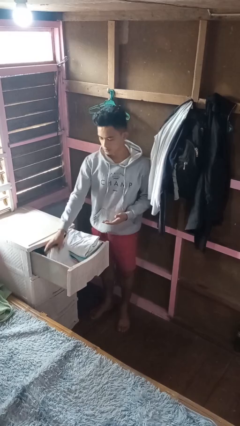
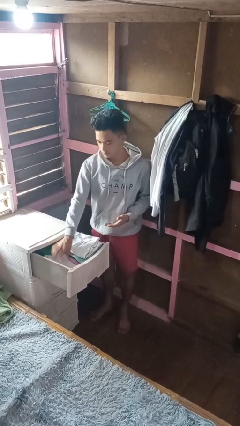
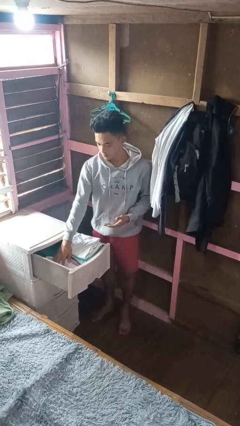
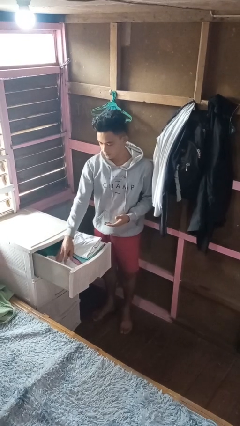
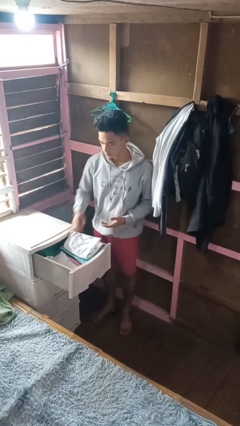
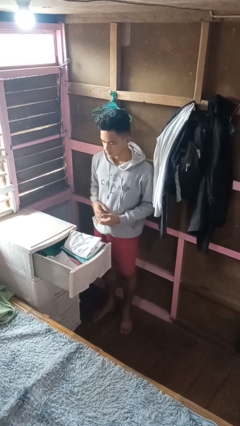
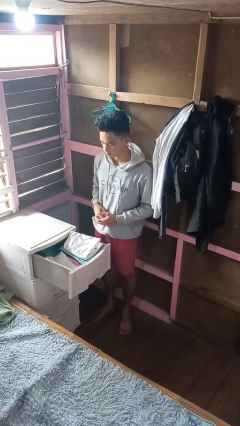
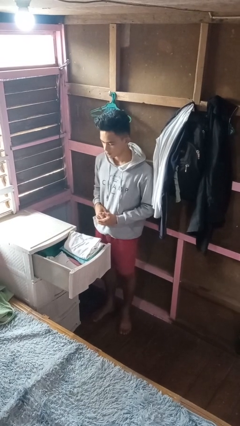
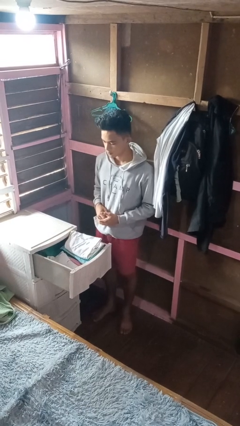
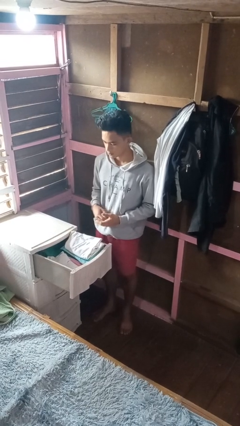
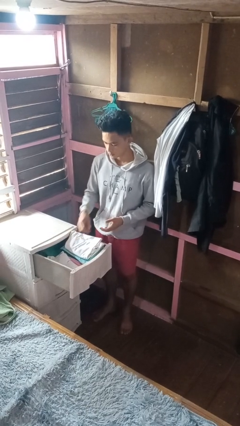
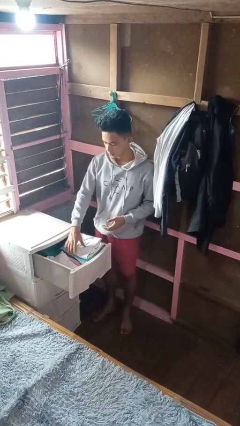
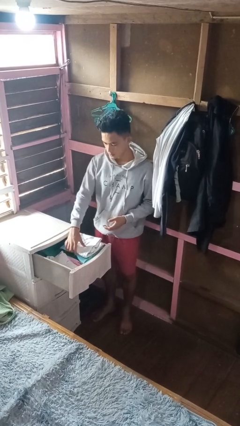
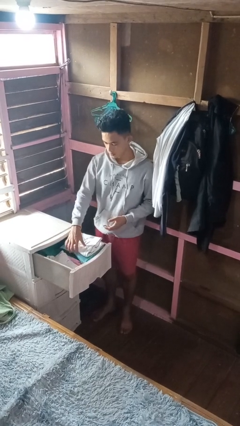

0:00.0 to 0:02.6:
person puts clothes into dresser

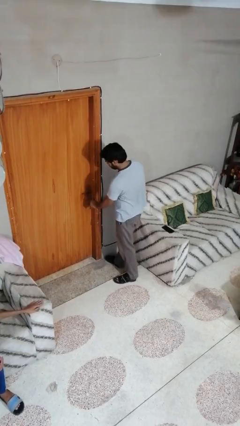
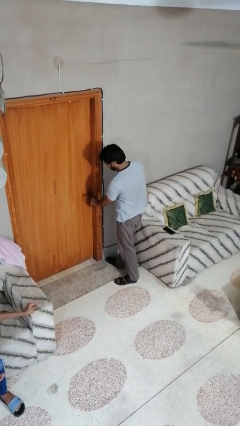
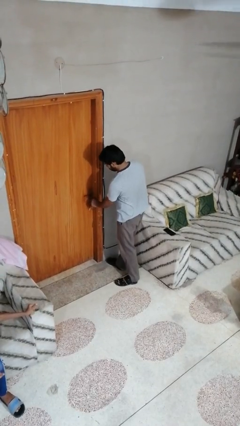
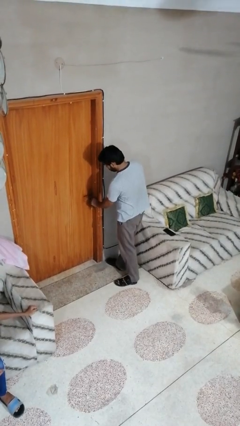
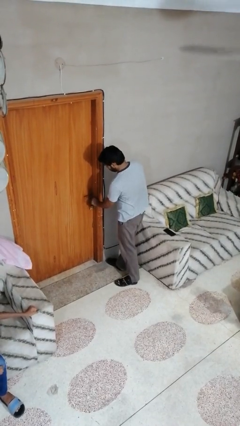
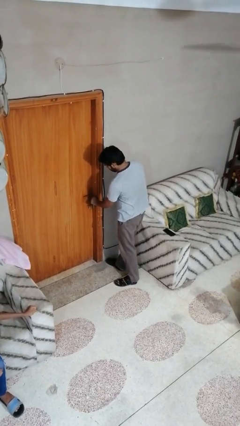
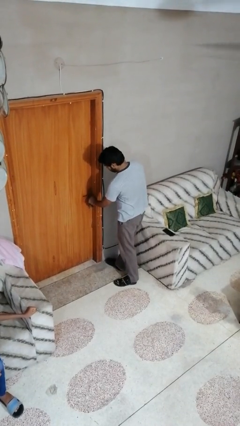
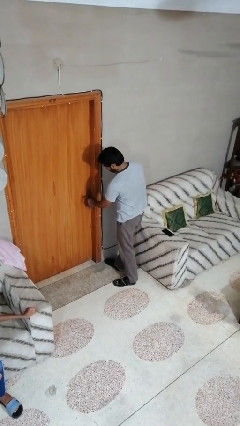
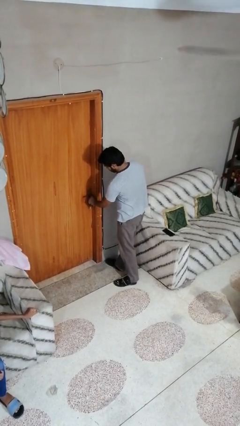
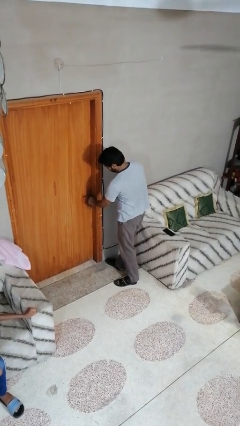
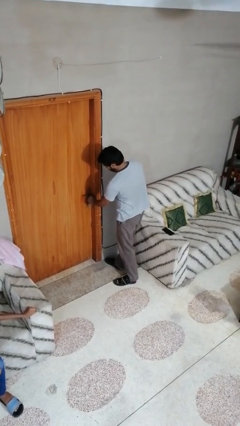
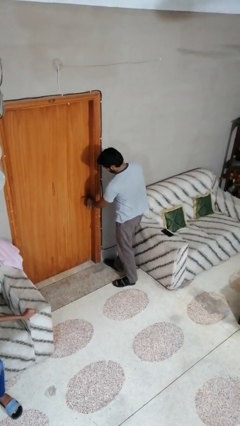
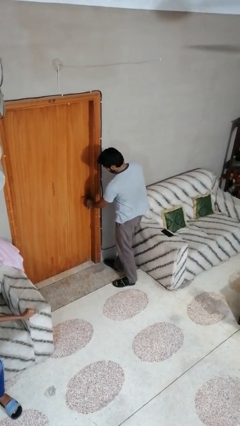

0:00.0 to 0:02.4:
person unlocks door with keys

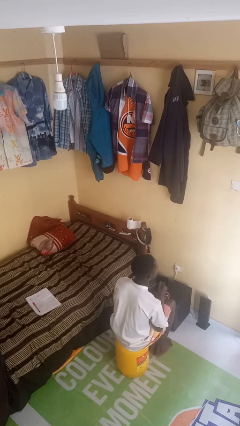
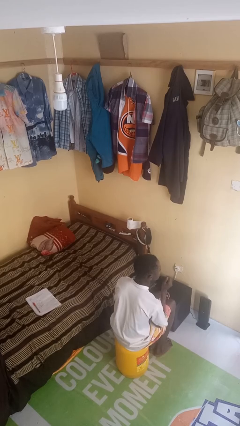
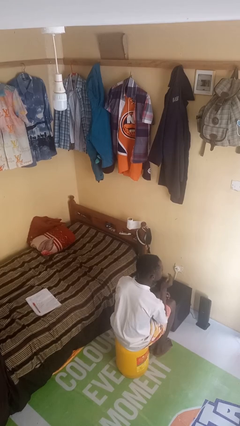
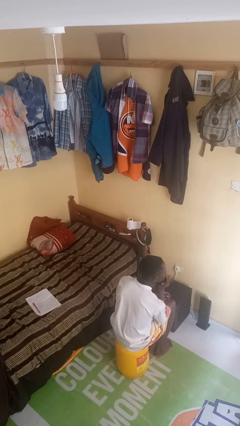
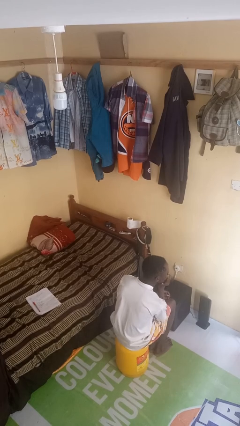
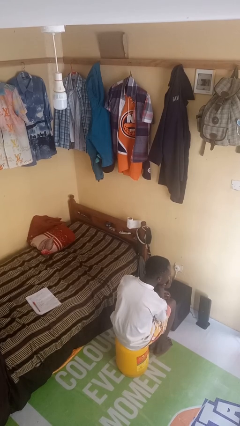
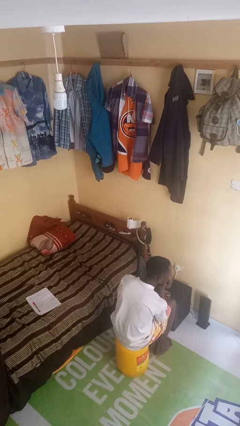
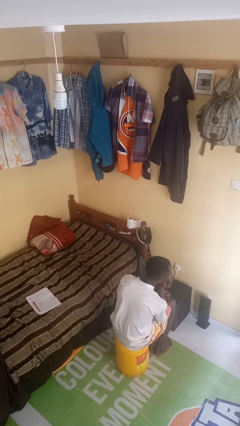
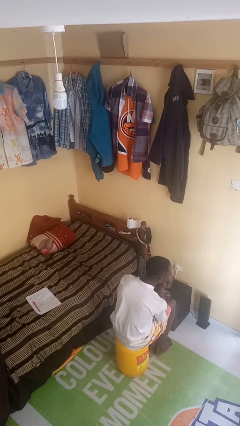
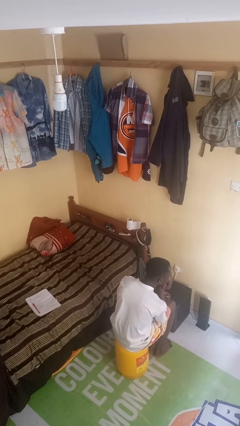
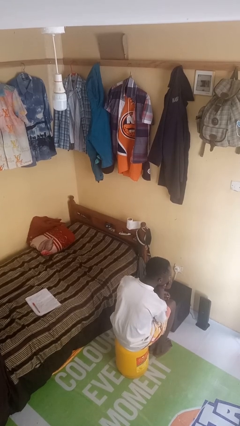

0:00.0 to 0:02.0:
person strokes chin

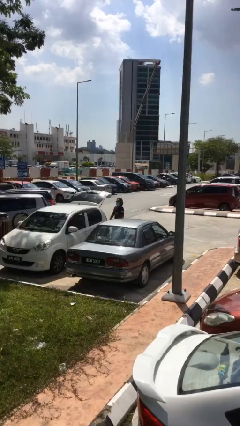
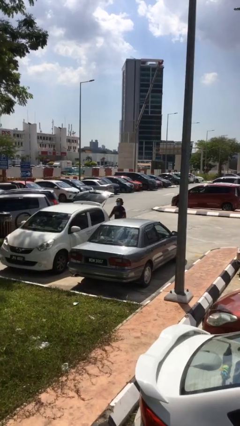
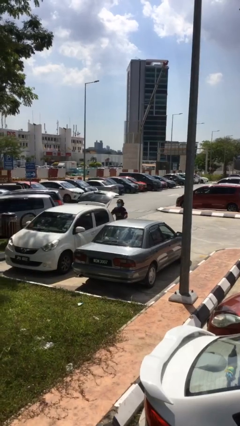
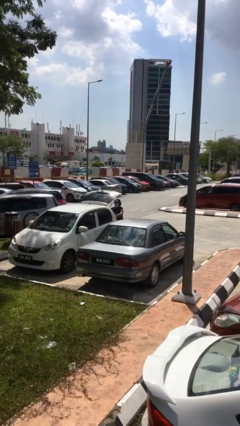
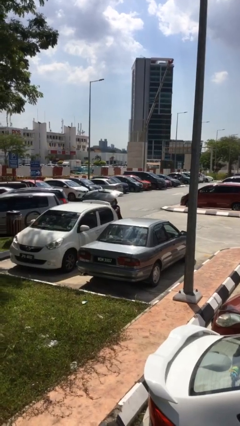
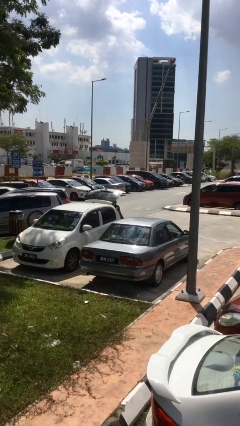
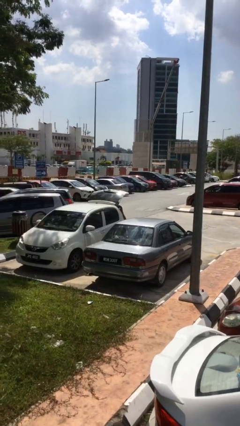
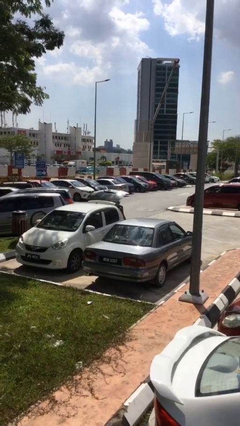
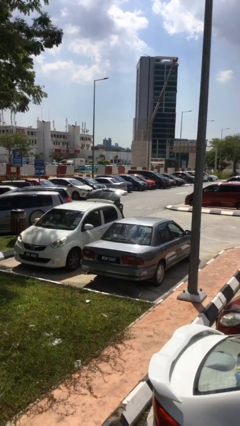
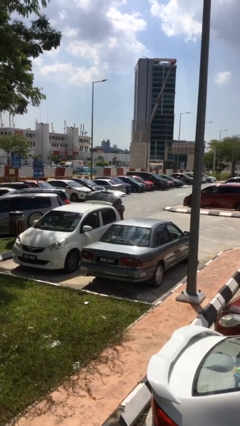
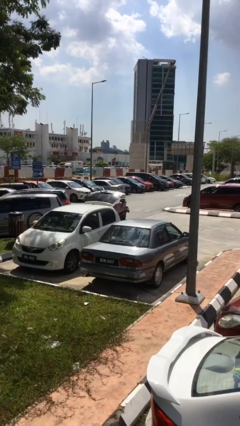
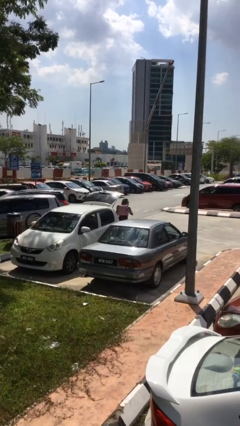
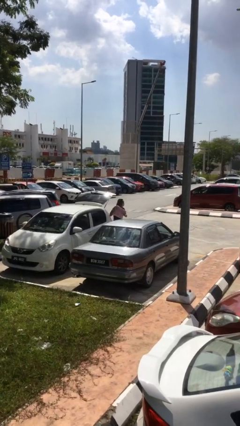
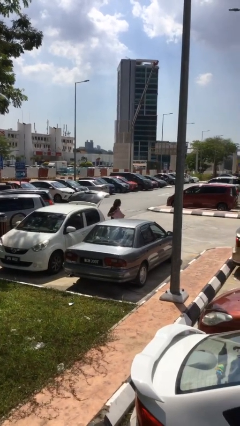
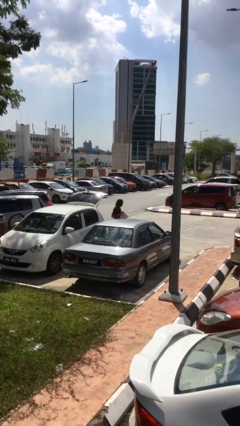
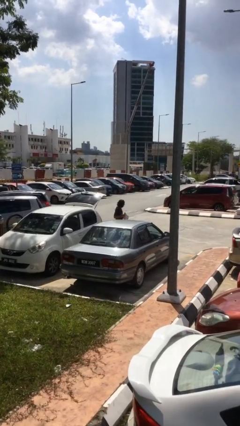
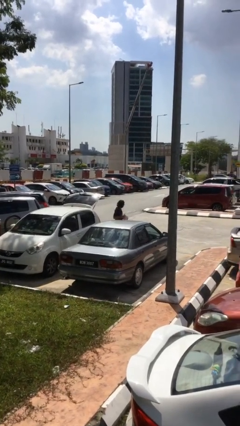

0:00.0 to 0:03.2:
person unloads car

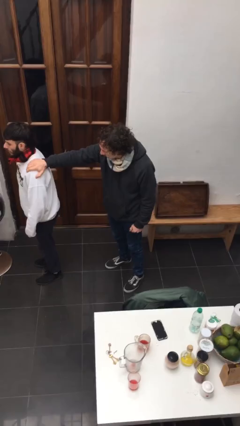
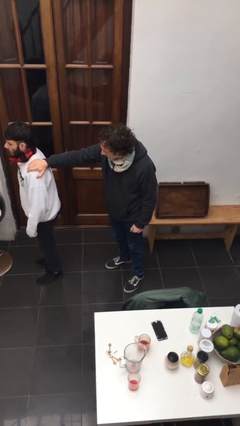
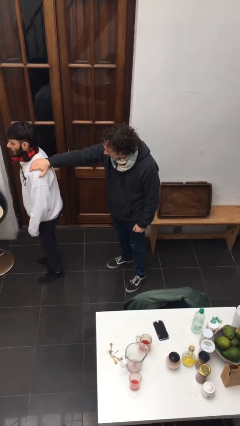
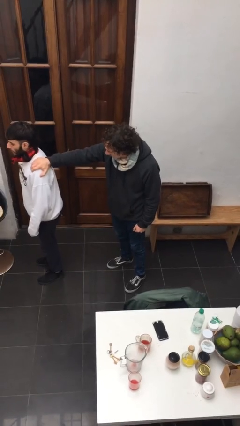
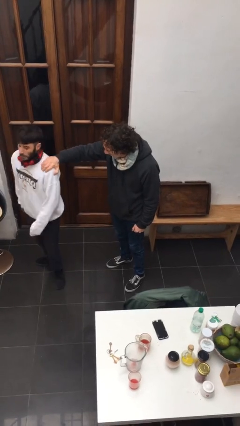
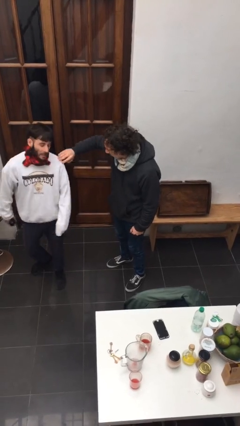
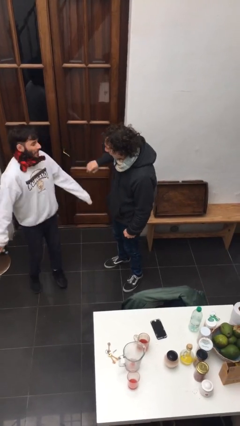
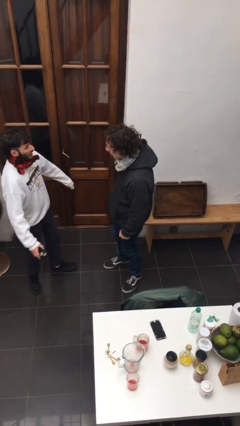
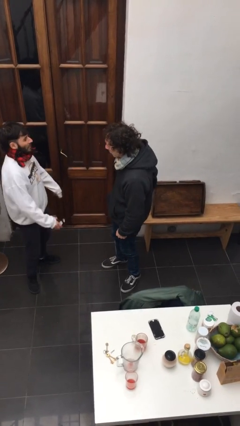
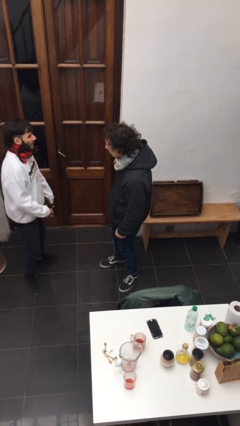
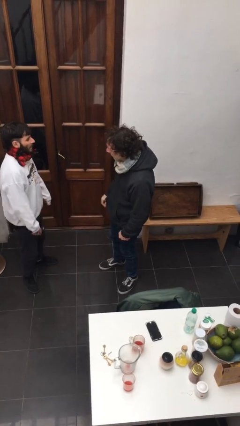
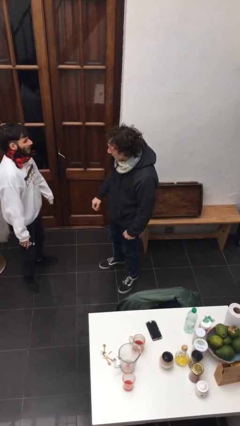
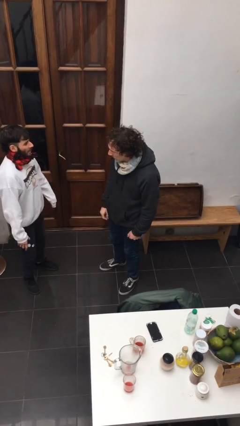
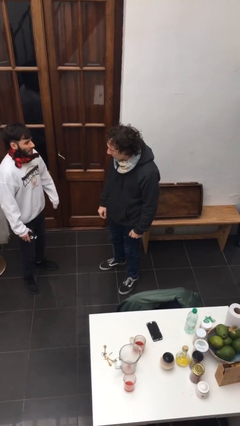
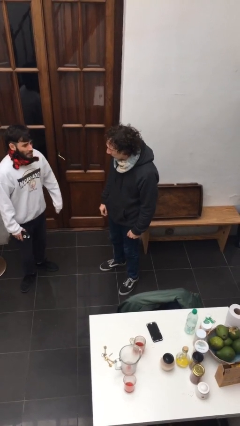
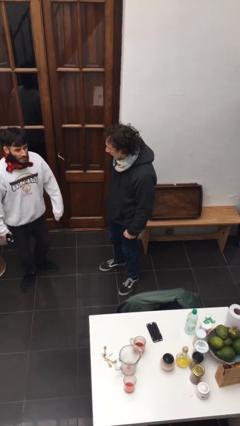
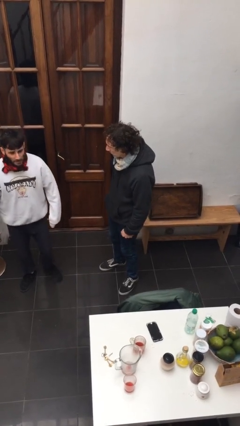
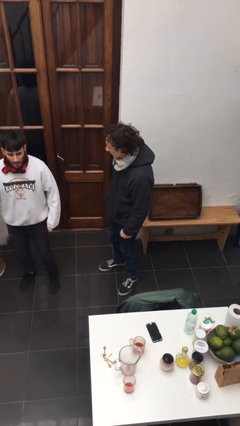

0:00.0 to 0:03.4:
person spins person around

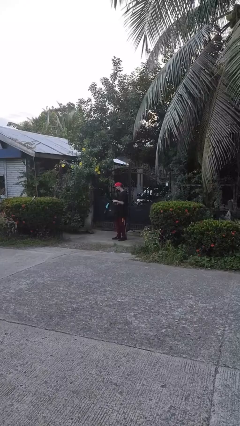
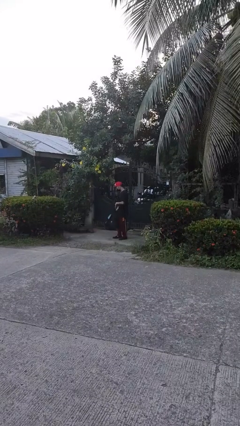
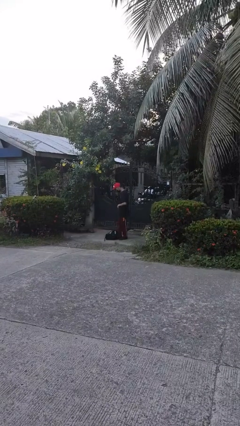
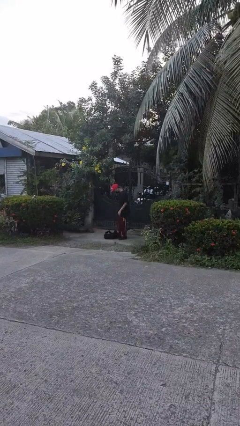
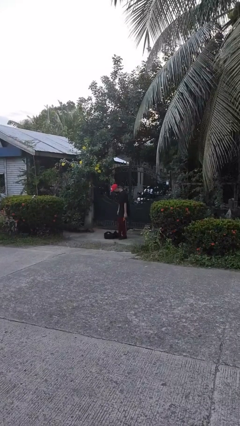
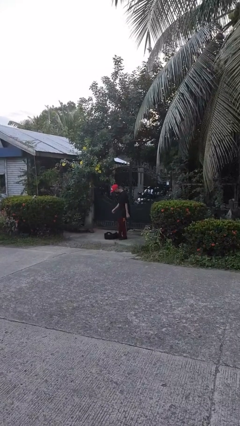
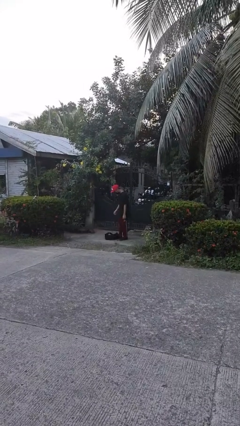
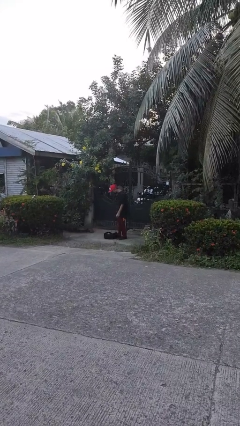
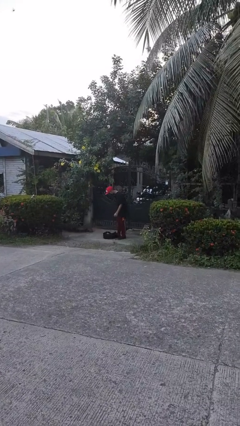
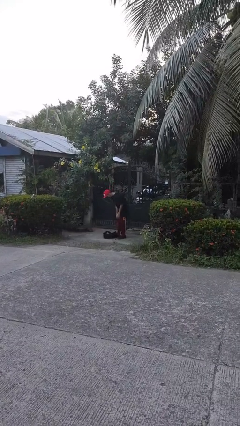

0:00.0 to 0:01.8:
person drops object

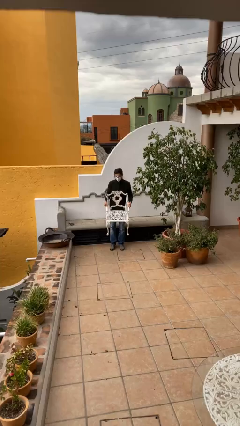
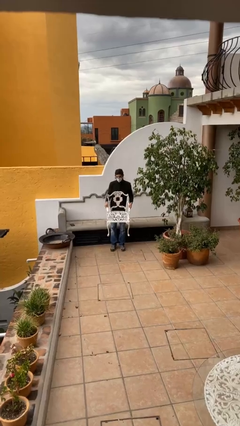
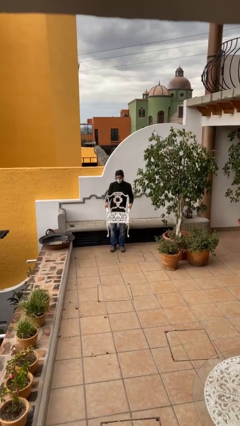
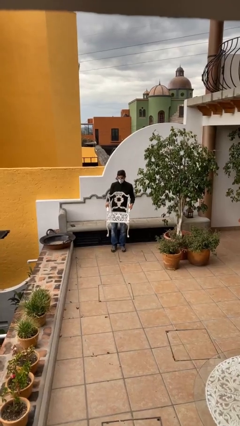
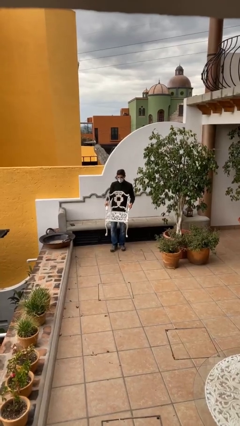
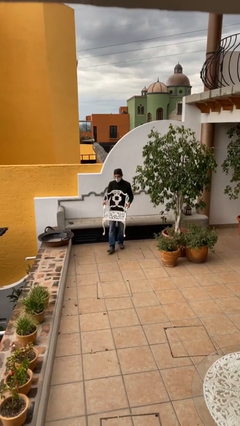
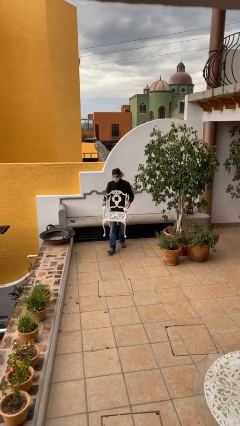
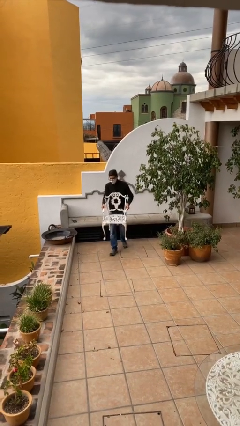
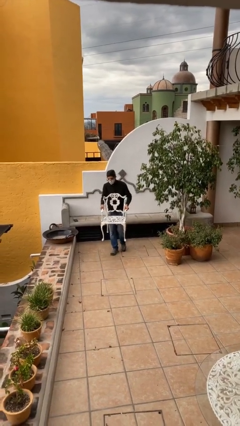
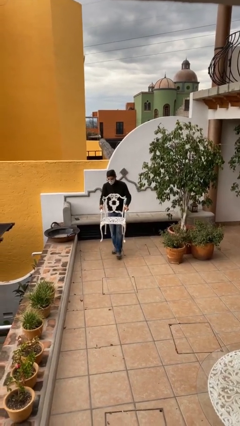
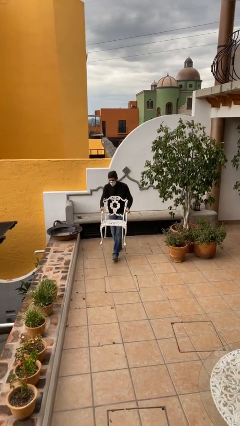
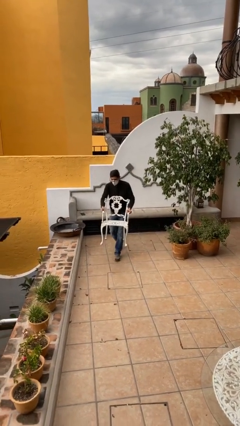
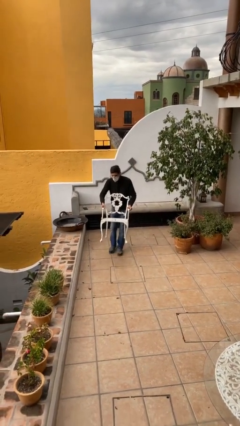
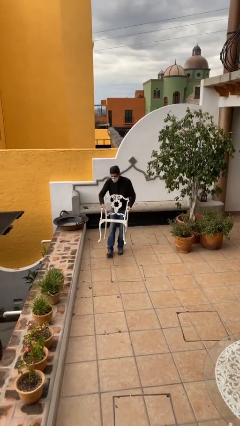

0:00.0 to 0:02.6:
person carries heavy object
